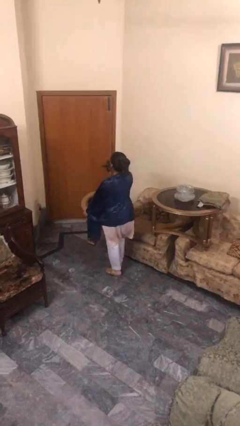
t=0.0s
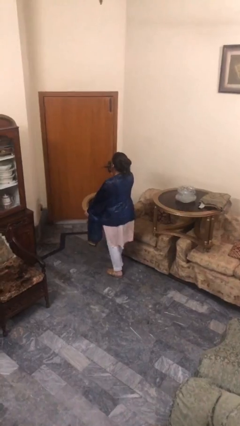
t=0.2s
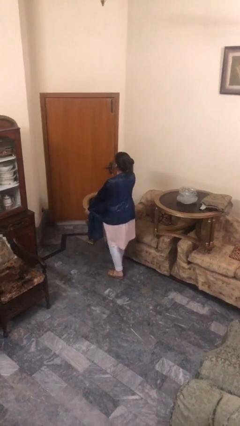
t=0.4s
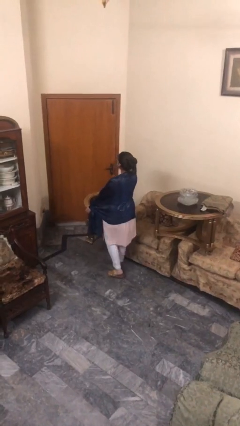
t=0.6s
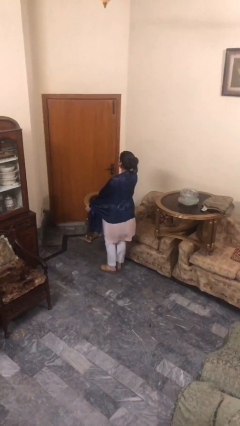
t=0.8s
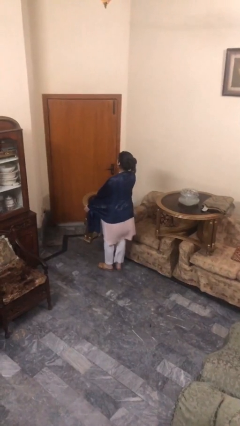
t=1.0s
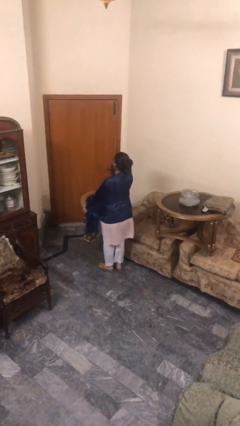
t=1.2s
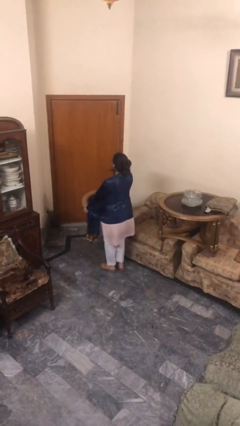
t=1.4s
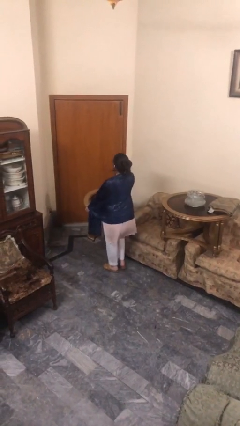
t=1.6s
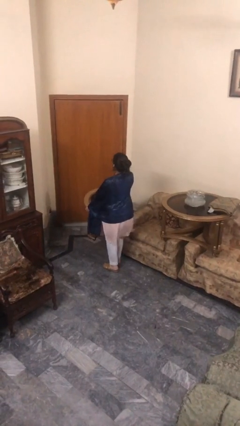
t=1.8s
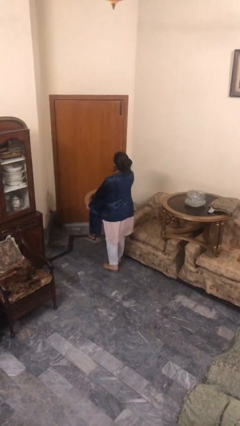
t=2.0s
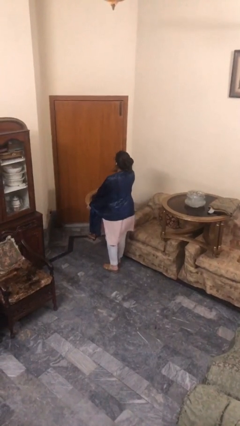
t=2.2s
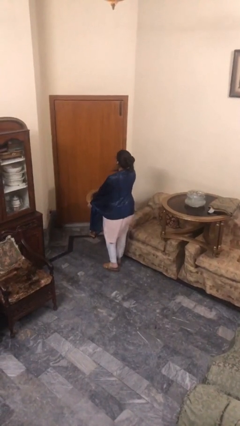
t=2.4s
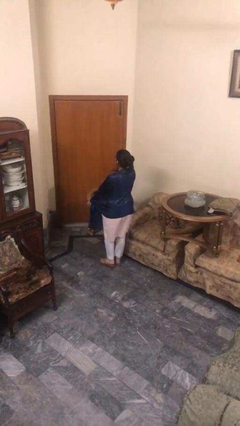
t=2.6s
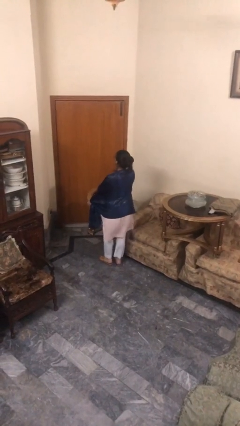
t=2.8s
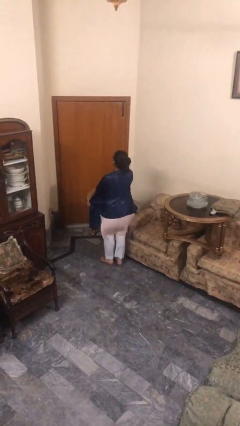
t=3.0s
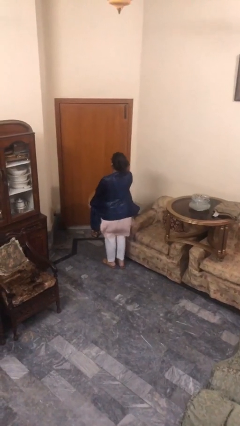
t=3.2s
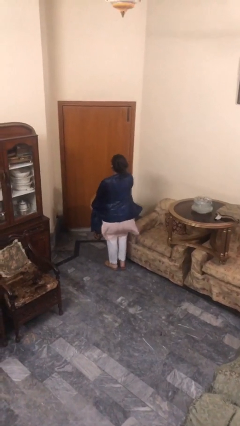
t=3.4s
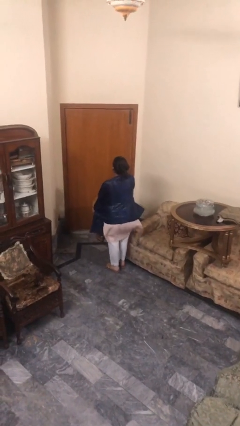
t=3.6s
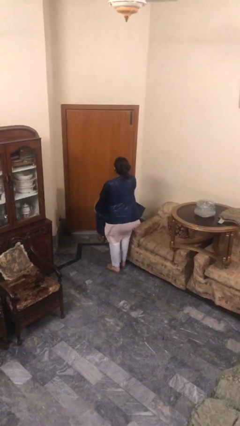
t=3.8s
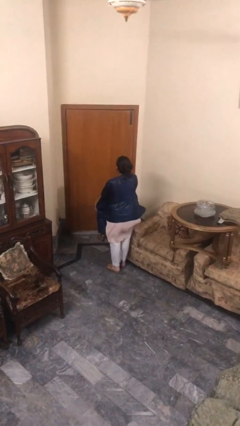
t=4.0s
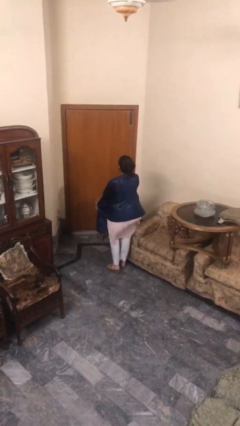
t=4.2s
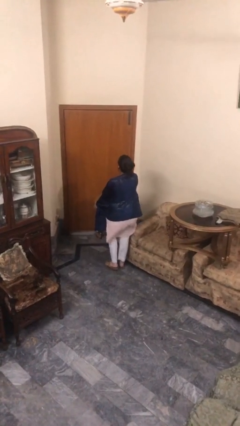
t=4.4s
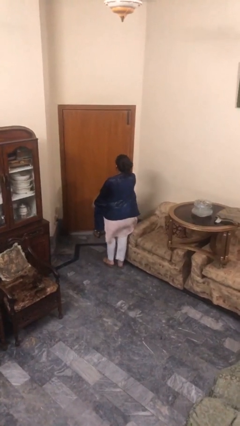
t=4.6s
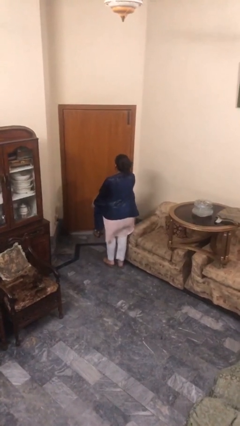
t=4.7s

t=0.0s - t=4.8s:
person carries furniture

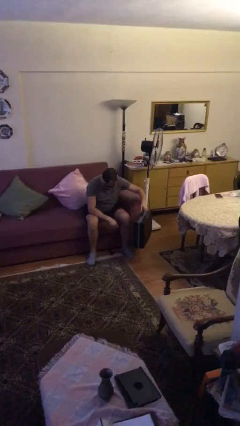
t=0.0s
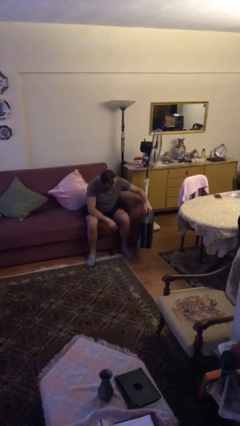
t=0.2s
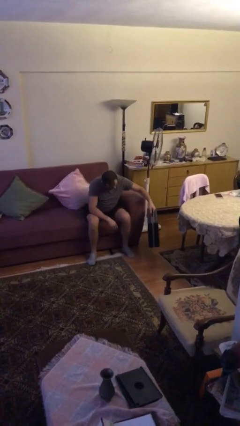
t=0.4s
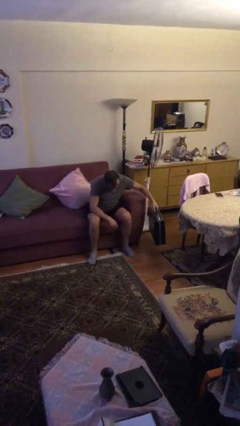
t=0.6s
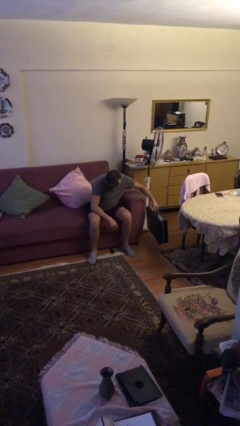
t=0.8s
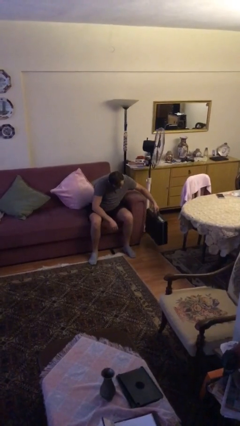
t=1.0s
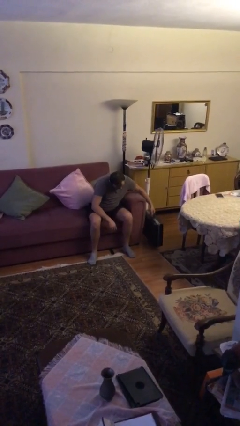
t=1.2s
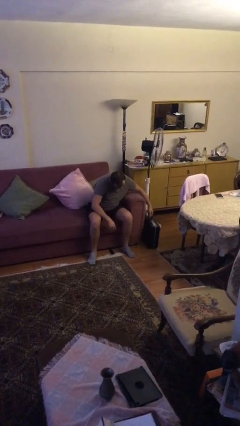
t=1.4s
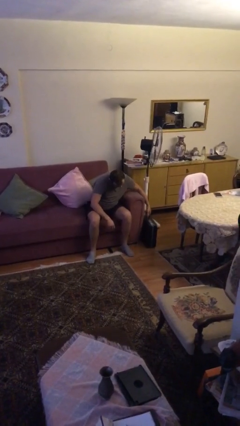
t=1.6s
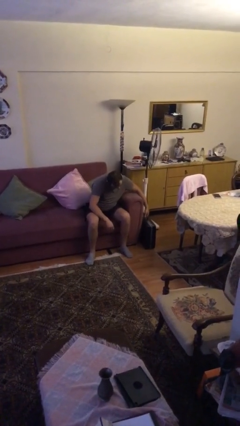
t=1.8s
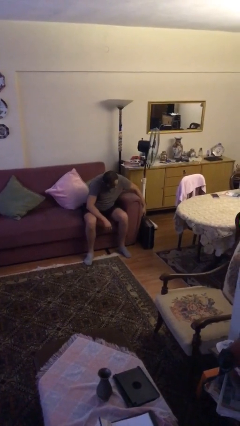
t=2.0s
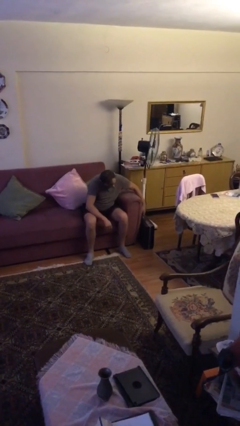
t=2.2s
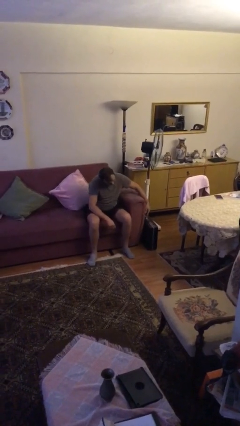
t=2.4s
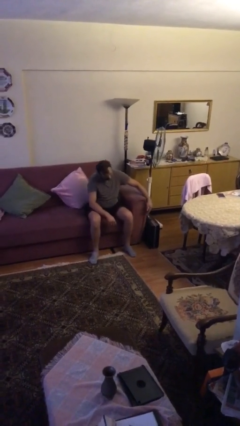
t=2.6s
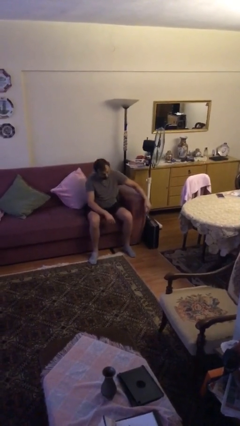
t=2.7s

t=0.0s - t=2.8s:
person puts down object on floor

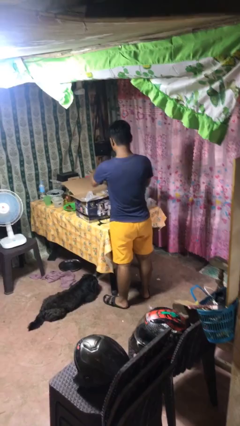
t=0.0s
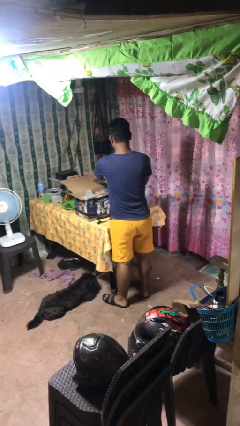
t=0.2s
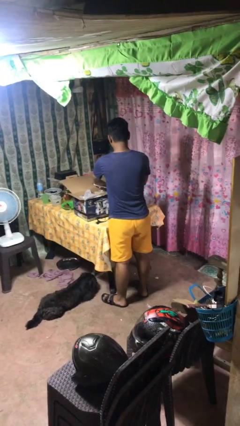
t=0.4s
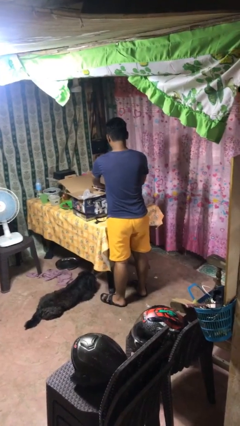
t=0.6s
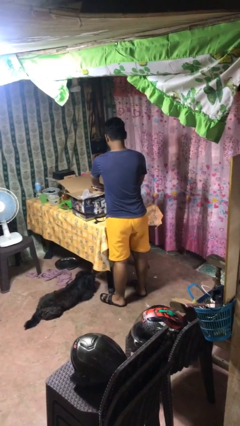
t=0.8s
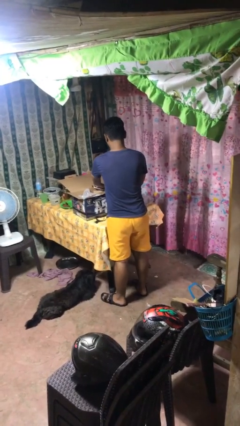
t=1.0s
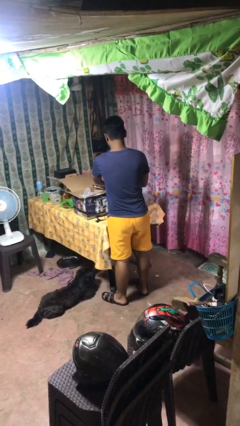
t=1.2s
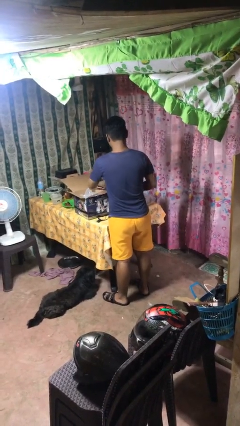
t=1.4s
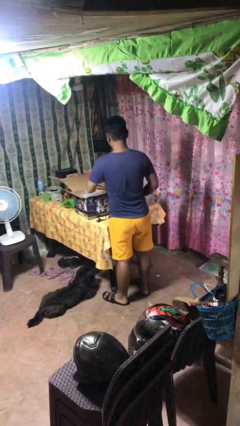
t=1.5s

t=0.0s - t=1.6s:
person puts object into box

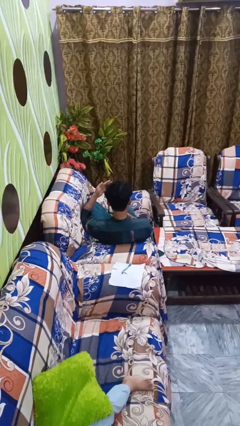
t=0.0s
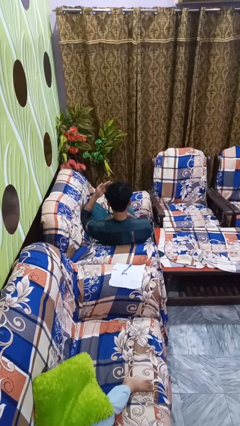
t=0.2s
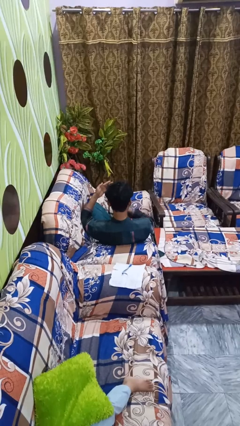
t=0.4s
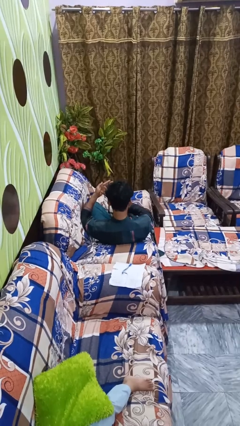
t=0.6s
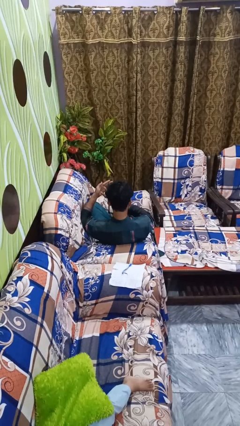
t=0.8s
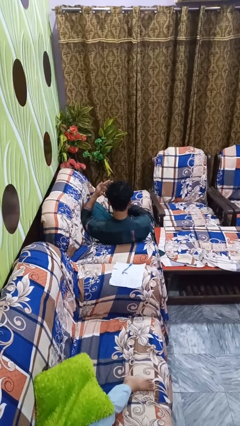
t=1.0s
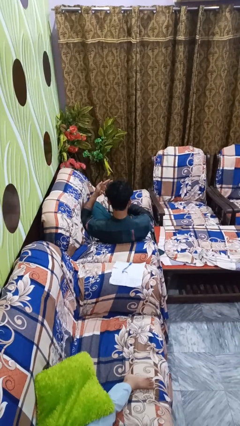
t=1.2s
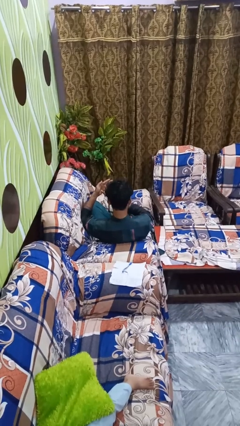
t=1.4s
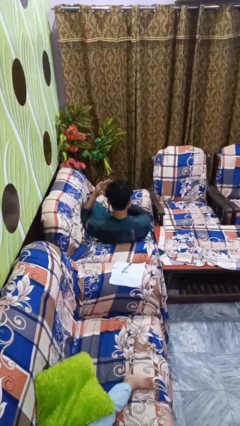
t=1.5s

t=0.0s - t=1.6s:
person gestures number three

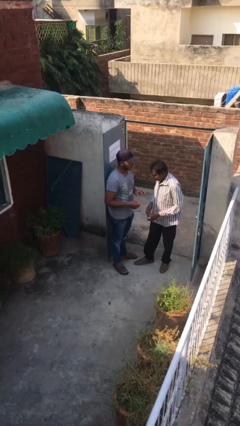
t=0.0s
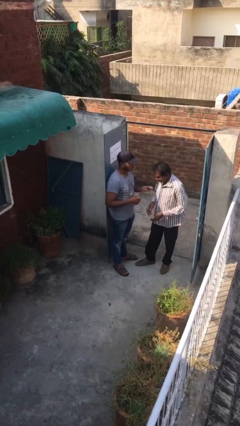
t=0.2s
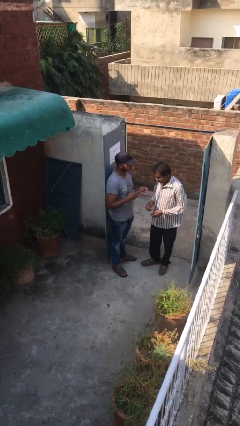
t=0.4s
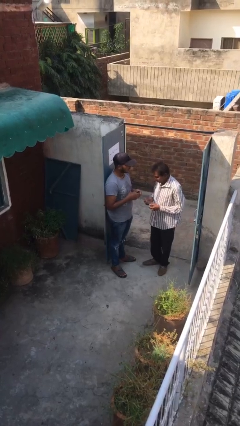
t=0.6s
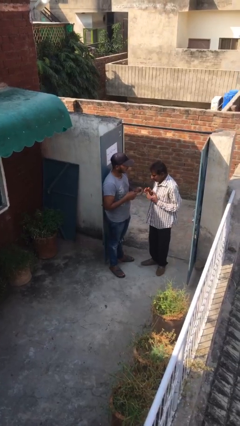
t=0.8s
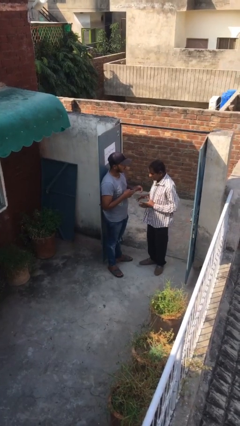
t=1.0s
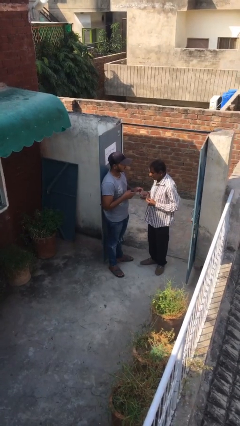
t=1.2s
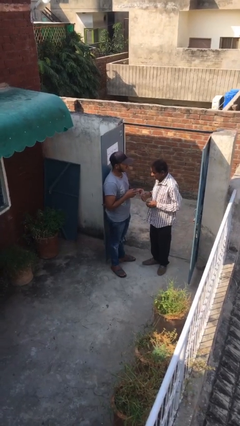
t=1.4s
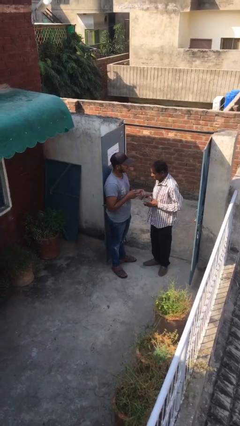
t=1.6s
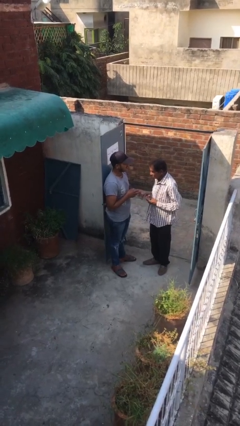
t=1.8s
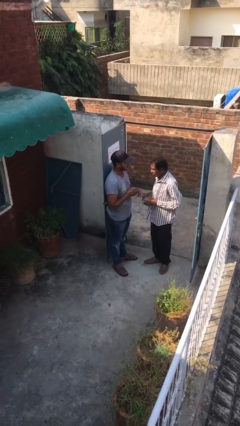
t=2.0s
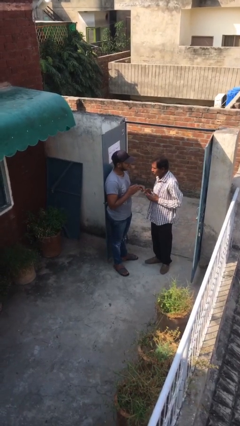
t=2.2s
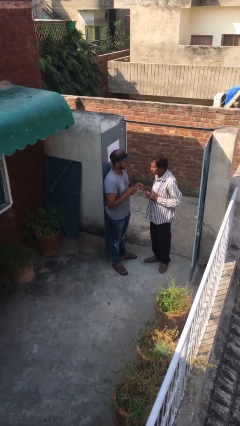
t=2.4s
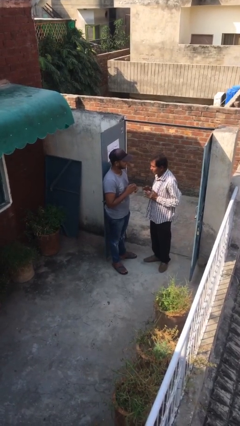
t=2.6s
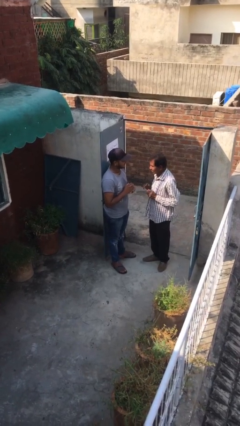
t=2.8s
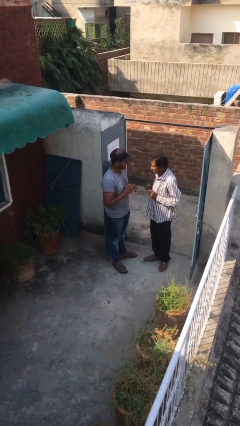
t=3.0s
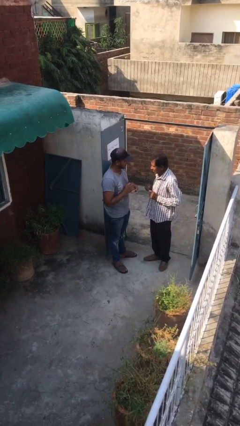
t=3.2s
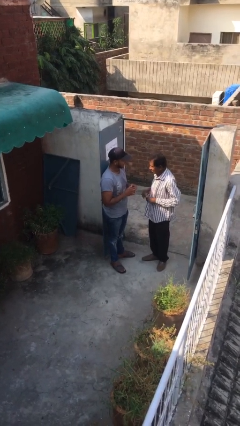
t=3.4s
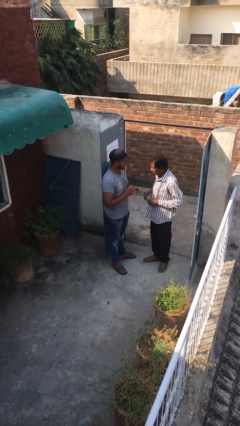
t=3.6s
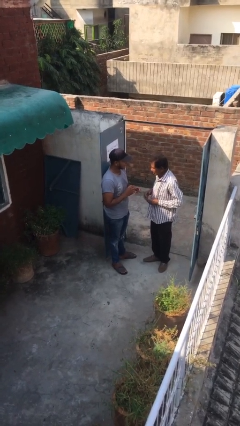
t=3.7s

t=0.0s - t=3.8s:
person talks to person

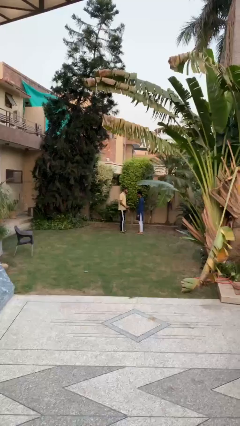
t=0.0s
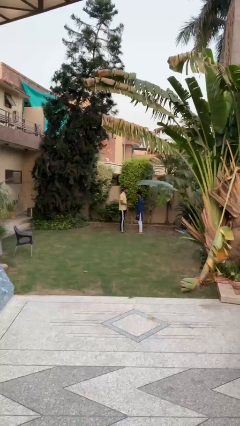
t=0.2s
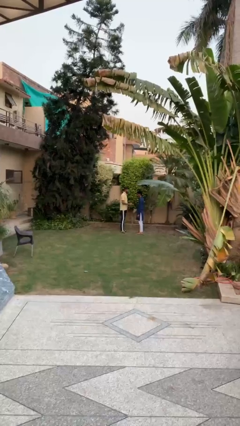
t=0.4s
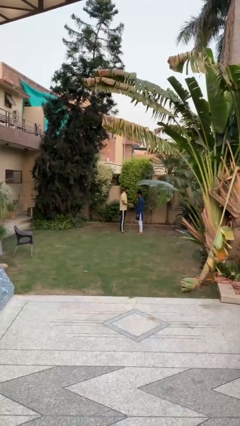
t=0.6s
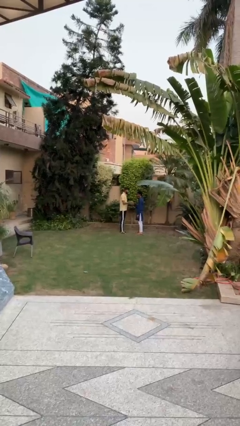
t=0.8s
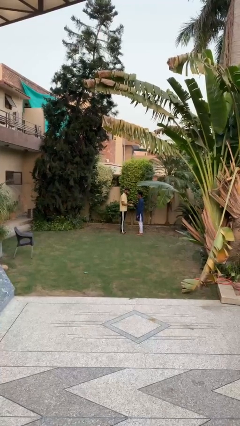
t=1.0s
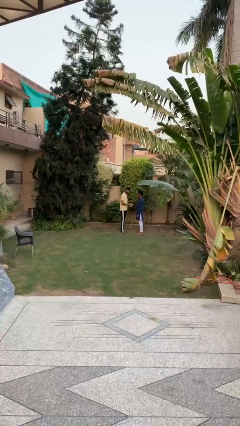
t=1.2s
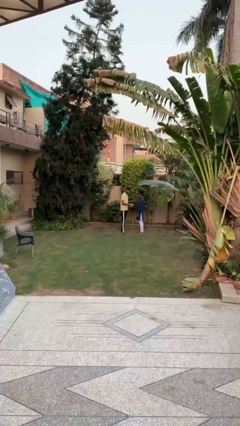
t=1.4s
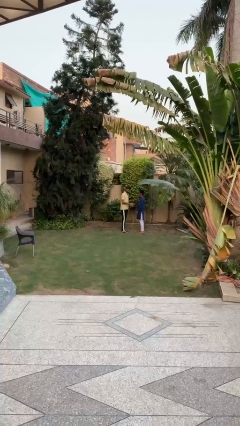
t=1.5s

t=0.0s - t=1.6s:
person shakes hand

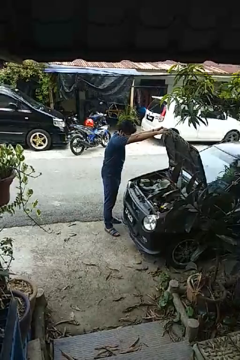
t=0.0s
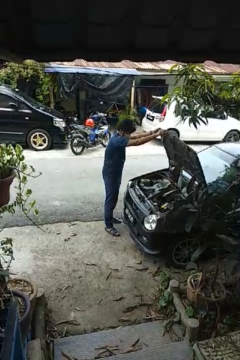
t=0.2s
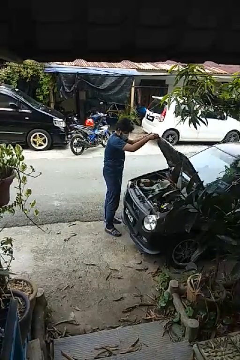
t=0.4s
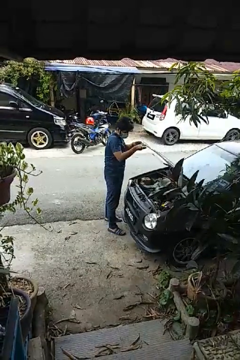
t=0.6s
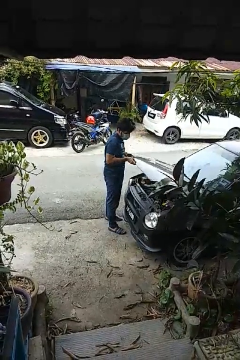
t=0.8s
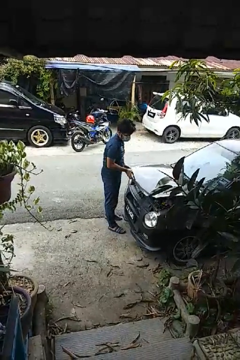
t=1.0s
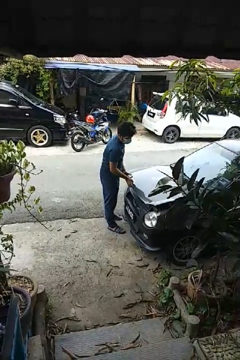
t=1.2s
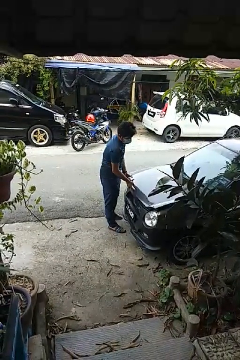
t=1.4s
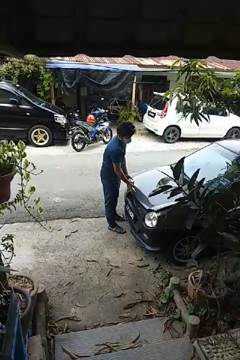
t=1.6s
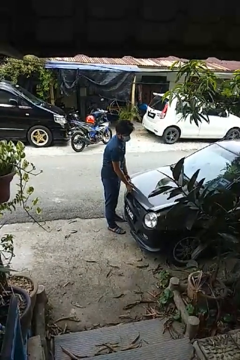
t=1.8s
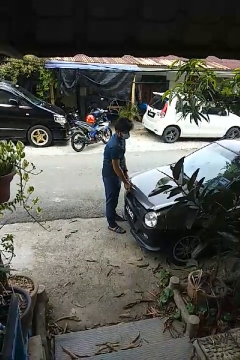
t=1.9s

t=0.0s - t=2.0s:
person closes car hood
